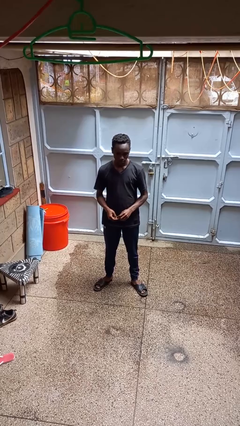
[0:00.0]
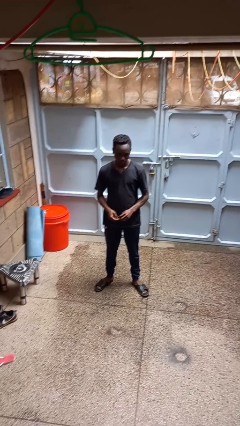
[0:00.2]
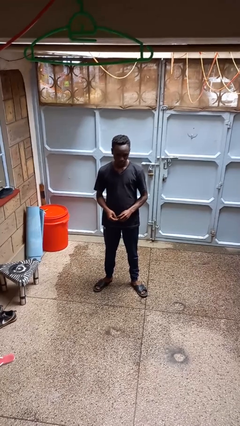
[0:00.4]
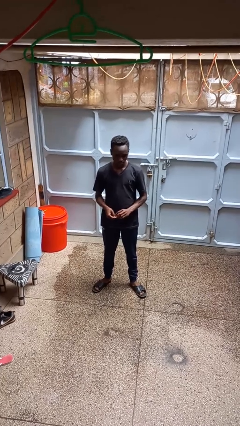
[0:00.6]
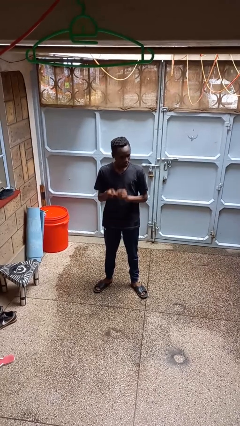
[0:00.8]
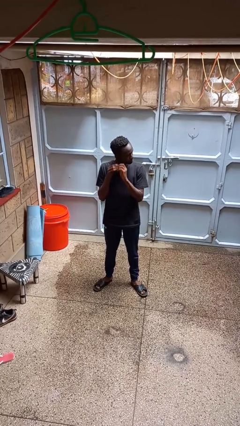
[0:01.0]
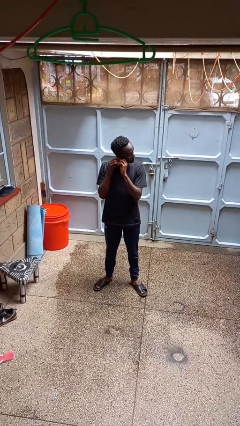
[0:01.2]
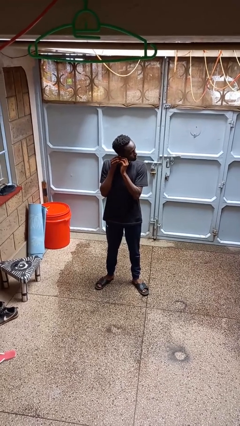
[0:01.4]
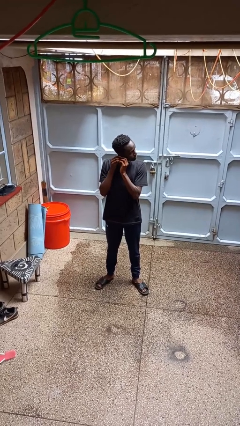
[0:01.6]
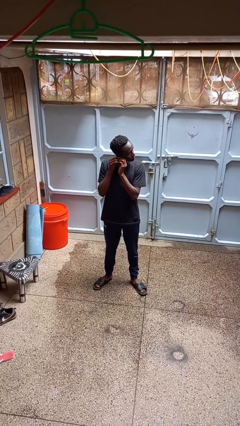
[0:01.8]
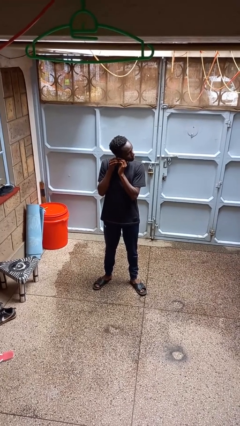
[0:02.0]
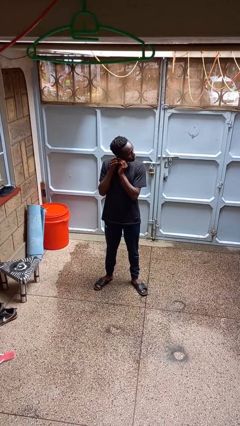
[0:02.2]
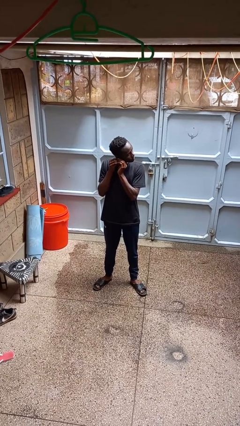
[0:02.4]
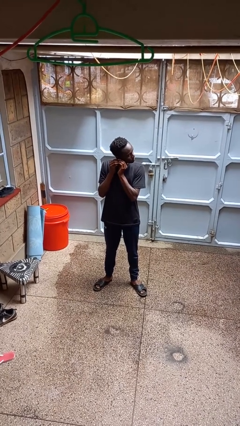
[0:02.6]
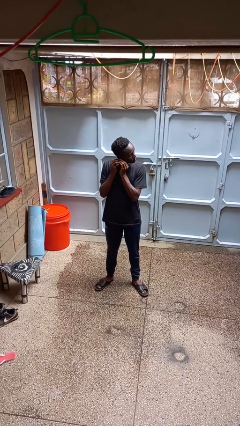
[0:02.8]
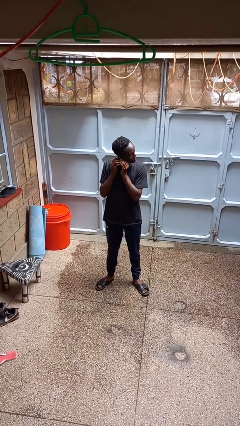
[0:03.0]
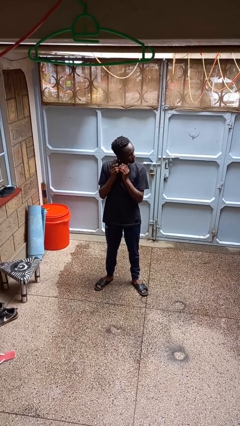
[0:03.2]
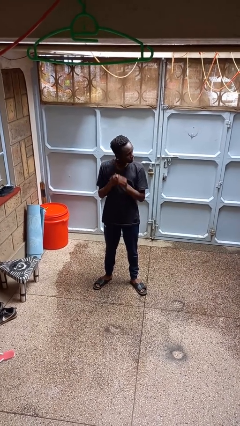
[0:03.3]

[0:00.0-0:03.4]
person puts on earrings

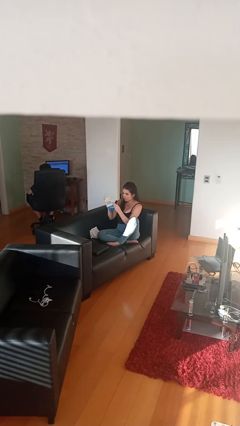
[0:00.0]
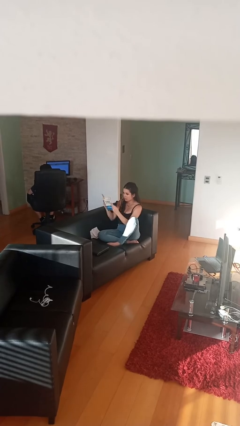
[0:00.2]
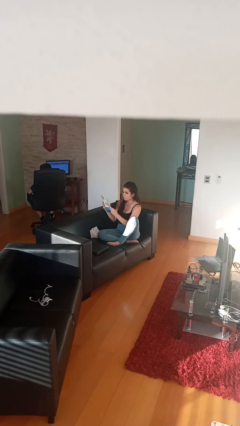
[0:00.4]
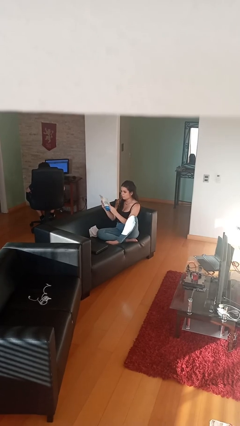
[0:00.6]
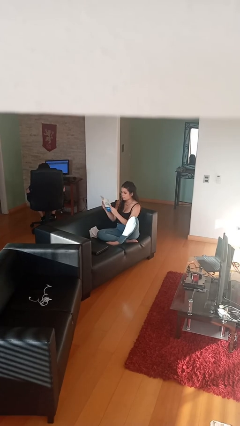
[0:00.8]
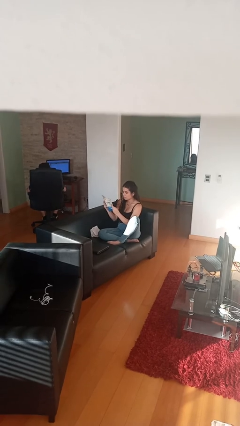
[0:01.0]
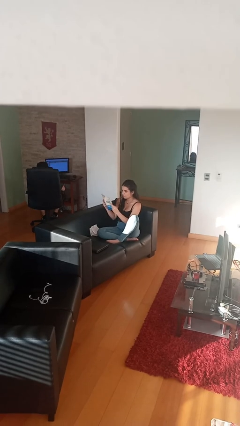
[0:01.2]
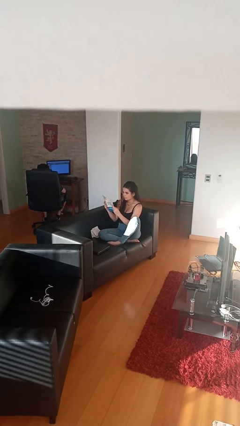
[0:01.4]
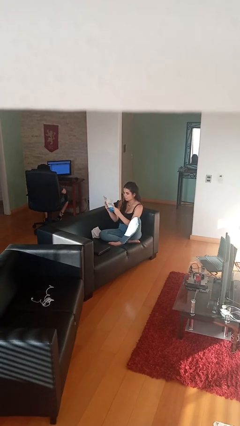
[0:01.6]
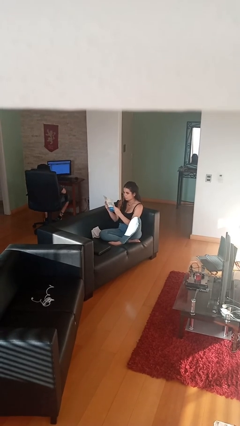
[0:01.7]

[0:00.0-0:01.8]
person reads document

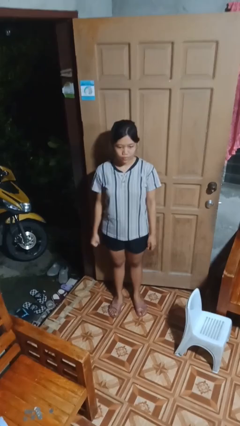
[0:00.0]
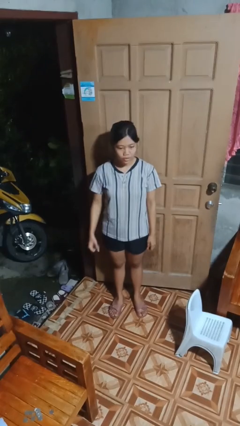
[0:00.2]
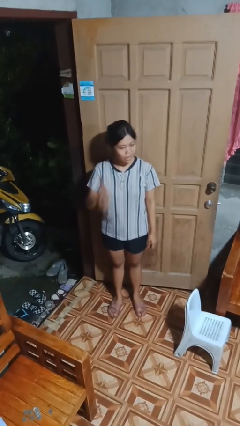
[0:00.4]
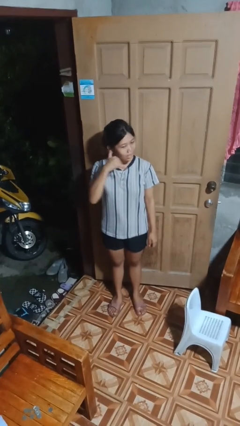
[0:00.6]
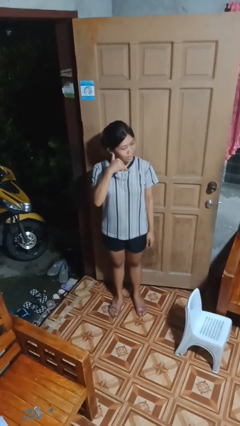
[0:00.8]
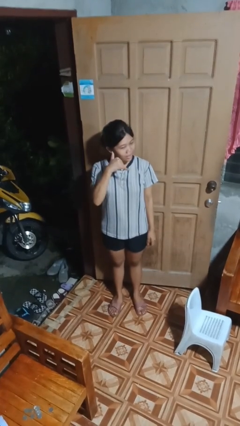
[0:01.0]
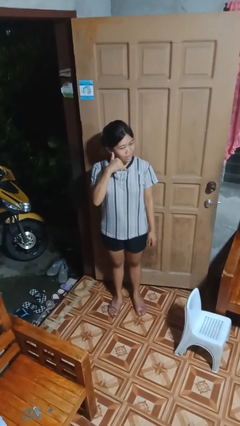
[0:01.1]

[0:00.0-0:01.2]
person gestures call me

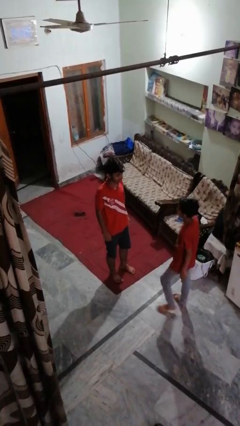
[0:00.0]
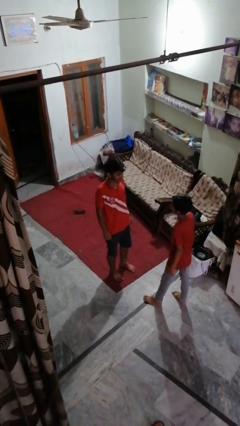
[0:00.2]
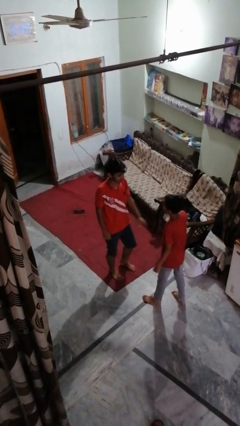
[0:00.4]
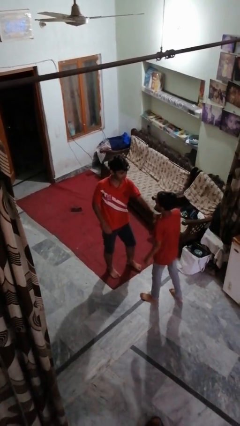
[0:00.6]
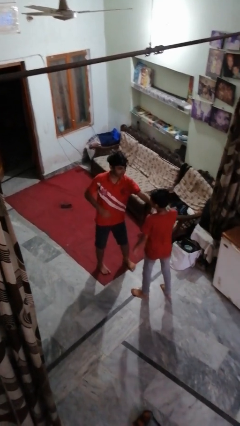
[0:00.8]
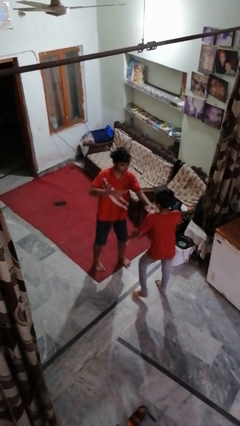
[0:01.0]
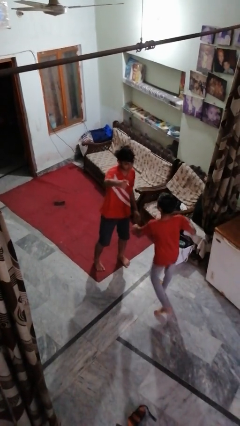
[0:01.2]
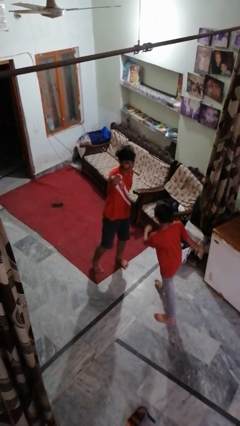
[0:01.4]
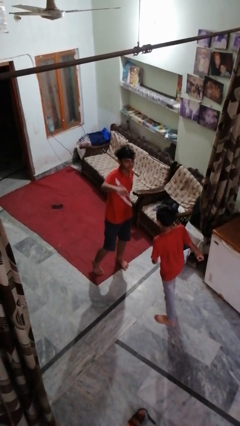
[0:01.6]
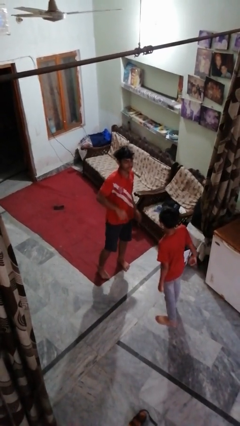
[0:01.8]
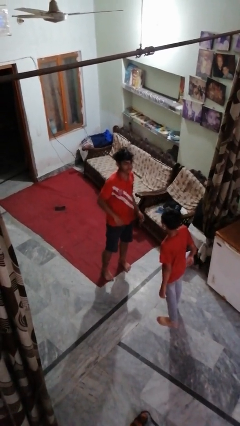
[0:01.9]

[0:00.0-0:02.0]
person shoves person

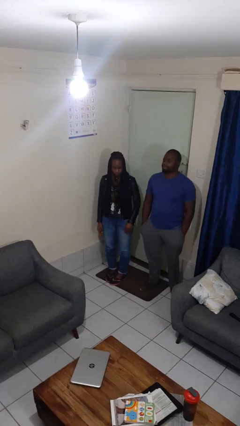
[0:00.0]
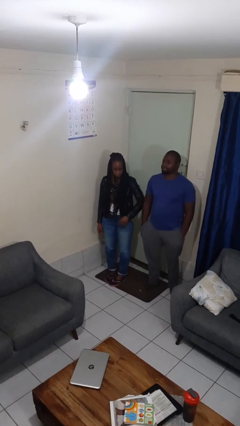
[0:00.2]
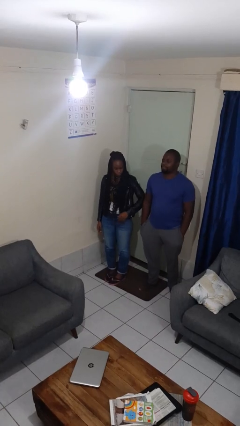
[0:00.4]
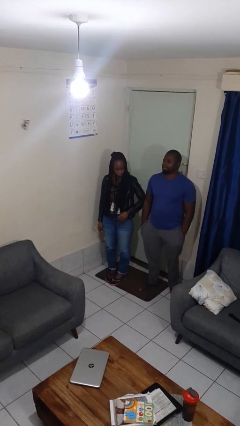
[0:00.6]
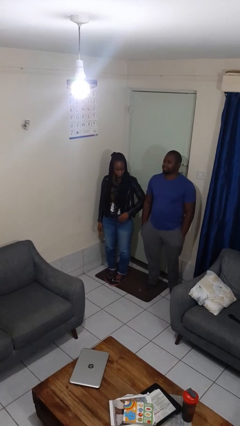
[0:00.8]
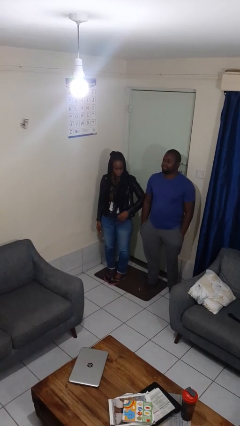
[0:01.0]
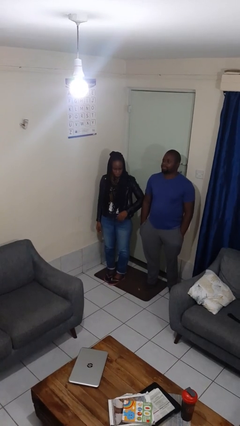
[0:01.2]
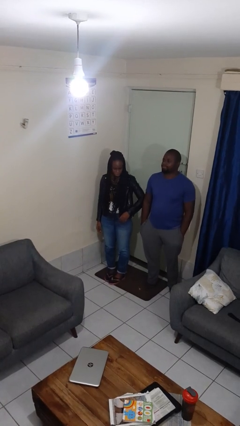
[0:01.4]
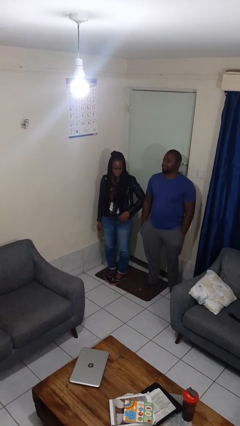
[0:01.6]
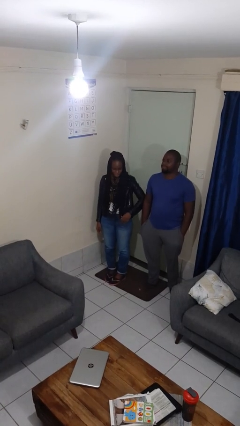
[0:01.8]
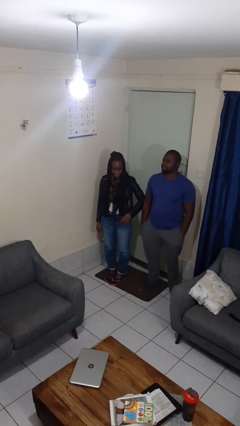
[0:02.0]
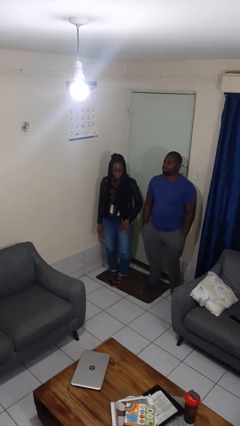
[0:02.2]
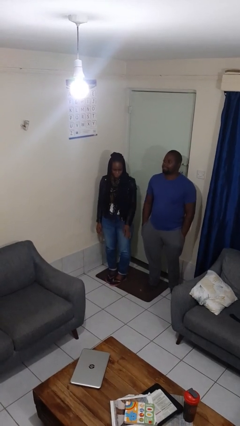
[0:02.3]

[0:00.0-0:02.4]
person nudges person with elbow

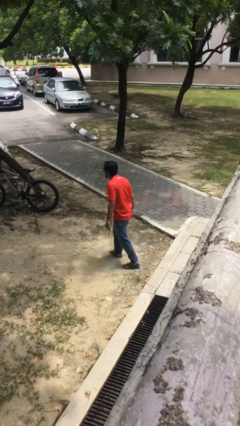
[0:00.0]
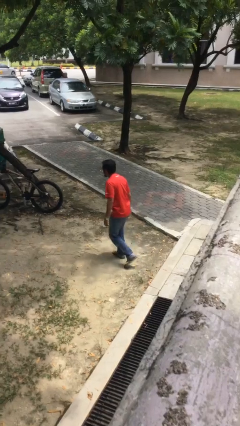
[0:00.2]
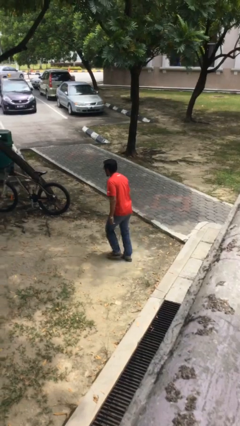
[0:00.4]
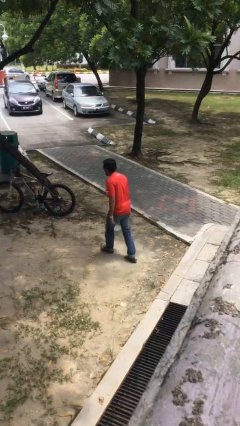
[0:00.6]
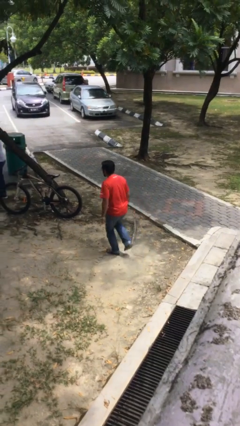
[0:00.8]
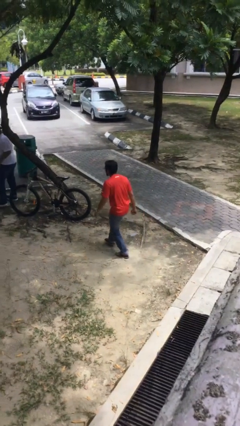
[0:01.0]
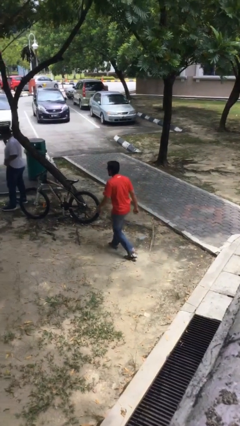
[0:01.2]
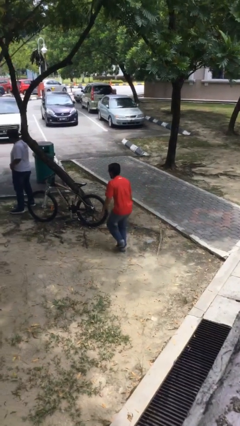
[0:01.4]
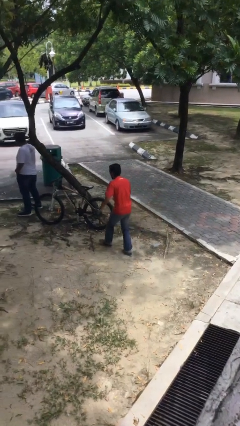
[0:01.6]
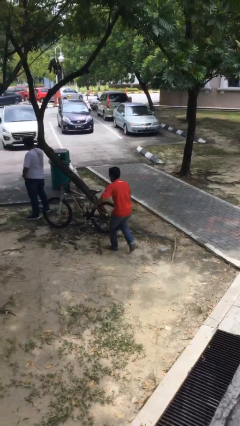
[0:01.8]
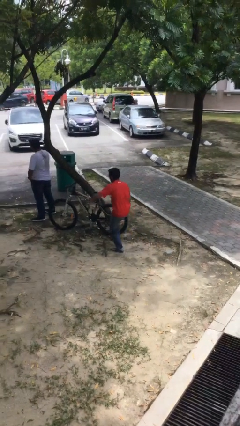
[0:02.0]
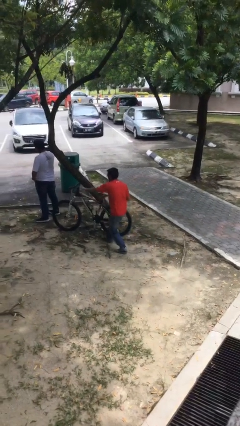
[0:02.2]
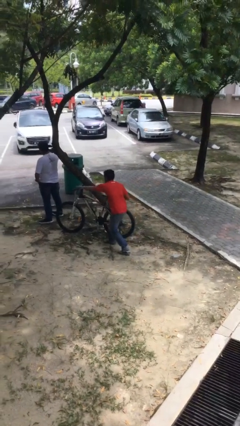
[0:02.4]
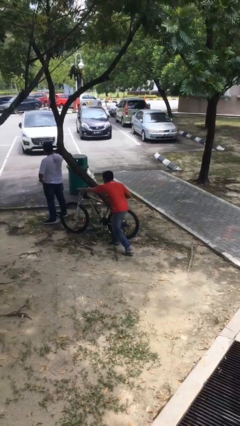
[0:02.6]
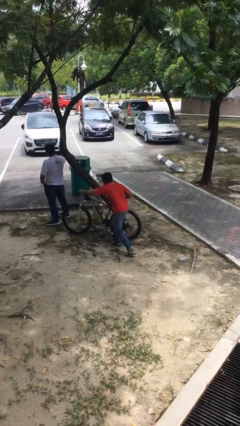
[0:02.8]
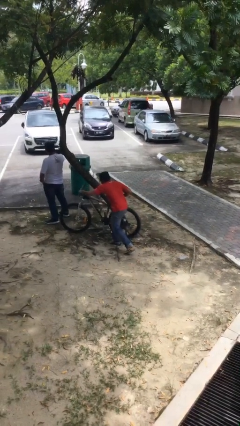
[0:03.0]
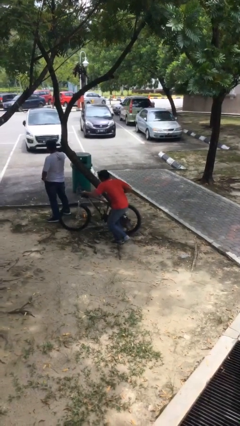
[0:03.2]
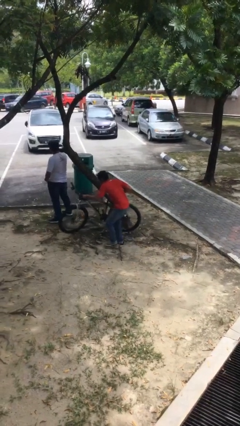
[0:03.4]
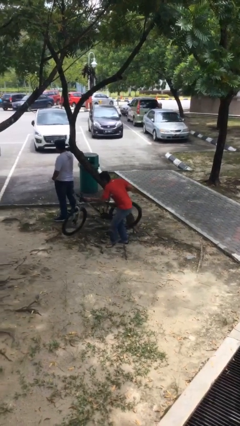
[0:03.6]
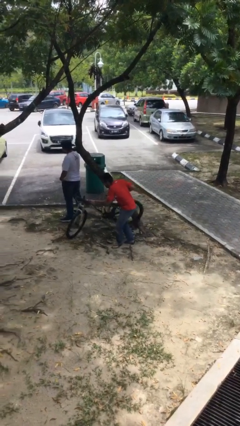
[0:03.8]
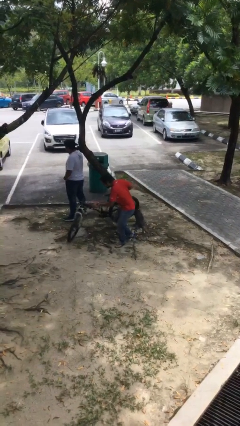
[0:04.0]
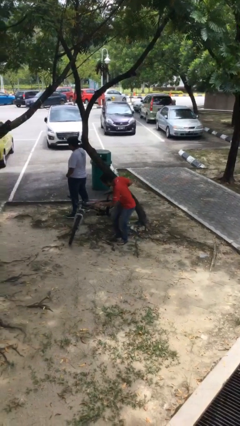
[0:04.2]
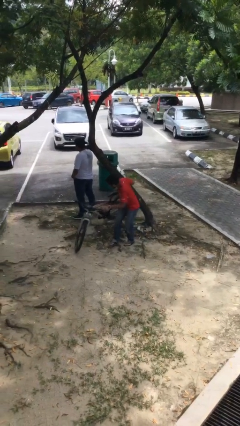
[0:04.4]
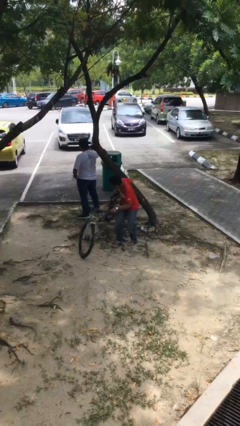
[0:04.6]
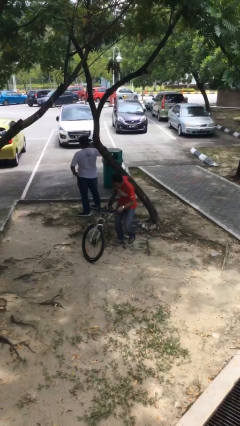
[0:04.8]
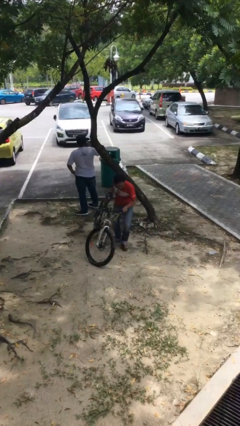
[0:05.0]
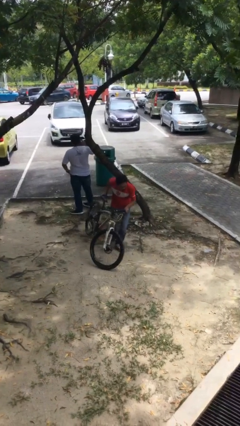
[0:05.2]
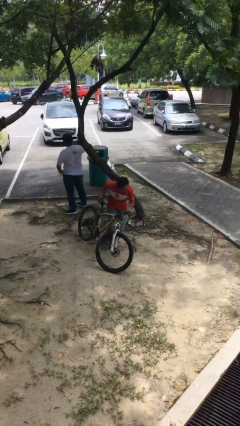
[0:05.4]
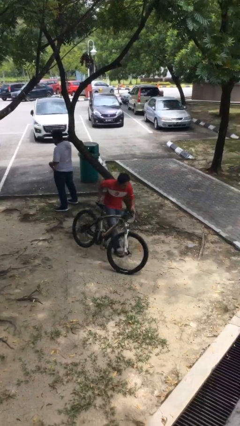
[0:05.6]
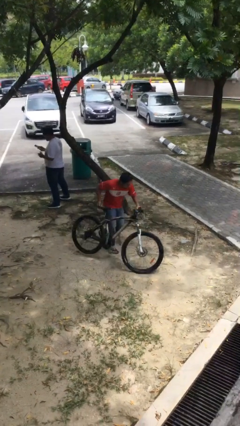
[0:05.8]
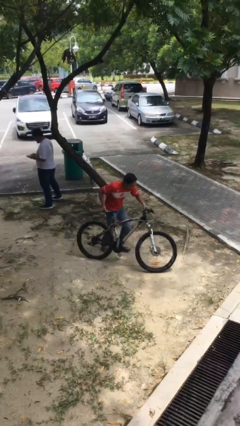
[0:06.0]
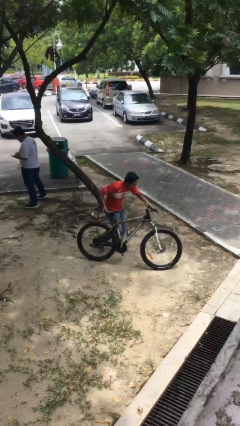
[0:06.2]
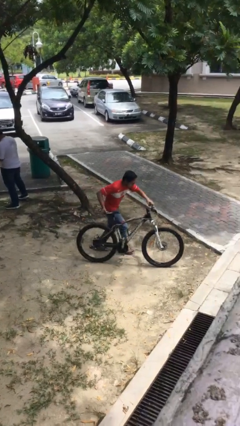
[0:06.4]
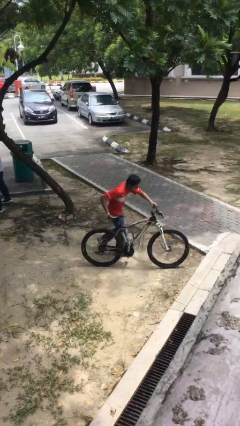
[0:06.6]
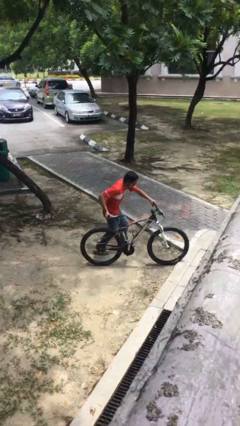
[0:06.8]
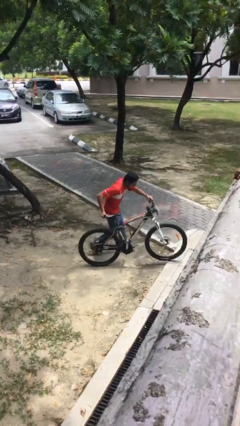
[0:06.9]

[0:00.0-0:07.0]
person steals object from person
